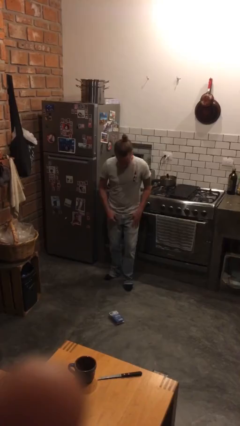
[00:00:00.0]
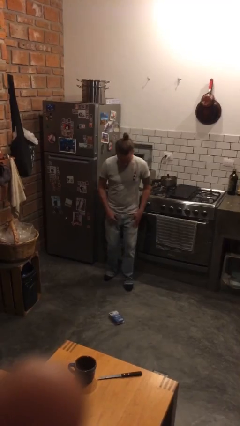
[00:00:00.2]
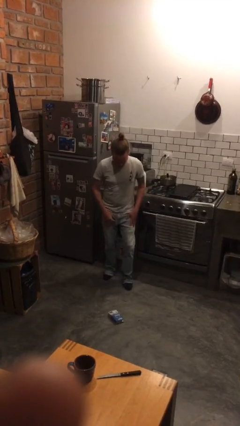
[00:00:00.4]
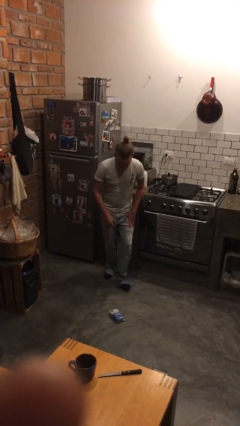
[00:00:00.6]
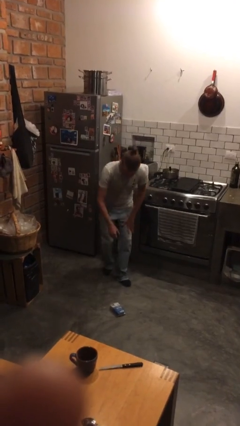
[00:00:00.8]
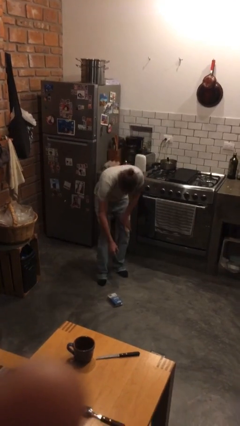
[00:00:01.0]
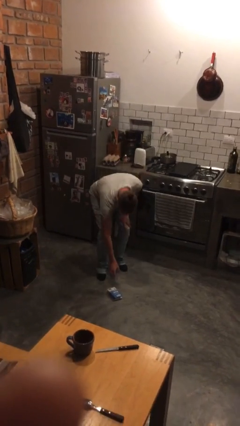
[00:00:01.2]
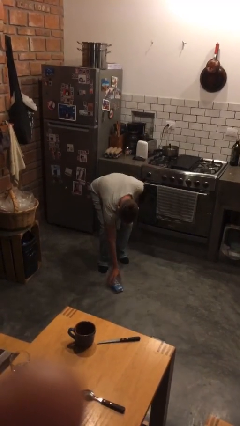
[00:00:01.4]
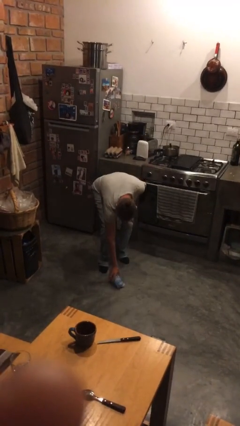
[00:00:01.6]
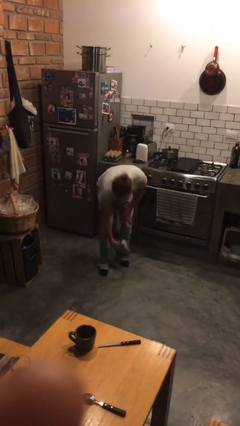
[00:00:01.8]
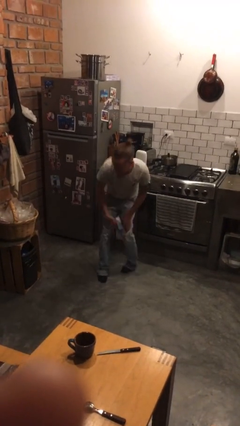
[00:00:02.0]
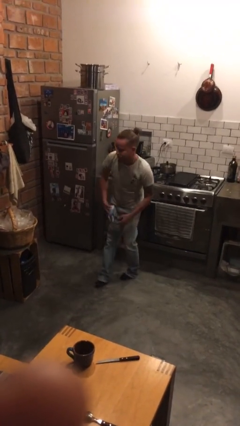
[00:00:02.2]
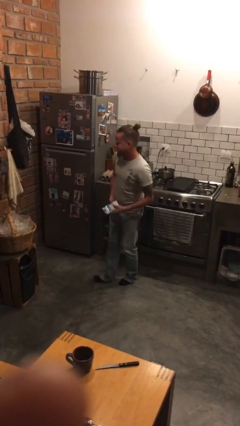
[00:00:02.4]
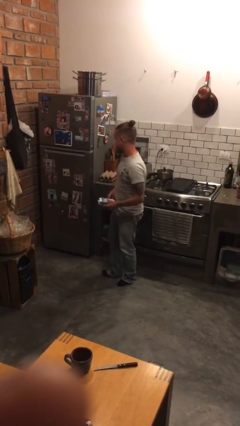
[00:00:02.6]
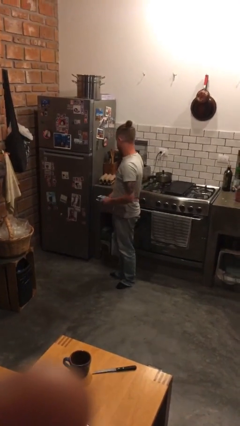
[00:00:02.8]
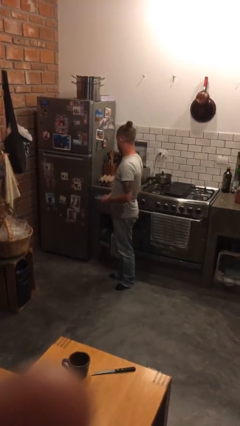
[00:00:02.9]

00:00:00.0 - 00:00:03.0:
person picks up object from floor

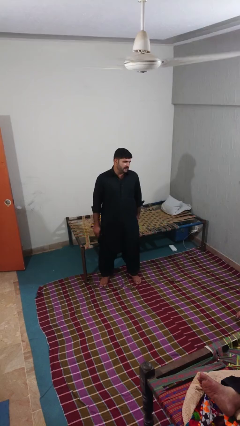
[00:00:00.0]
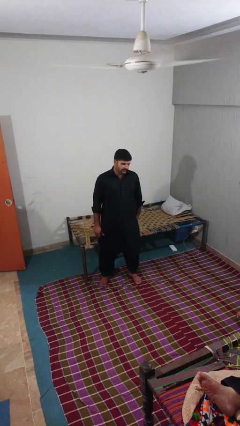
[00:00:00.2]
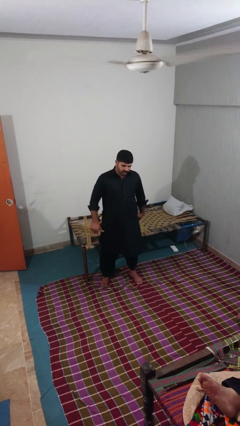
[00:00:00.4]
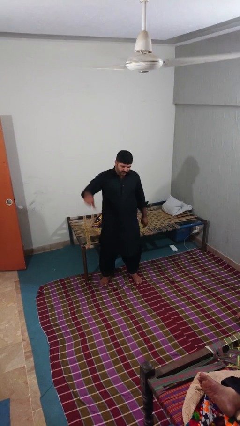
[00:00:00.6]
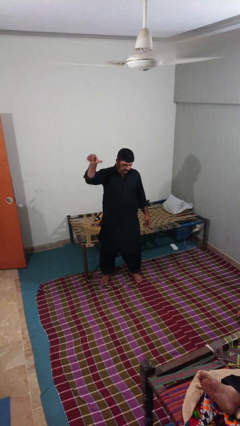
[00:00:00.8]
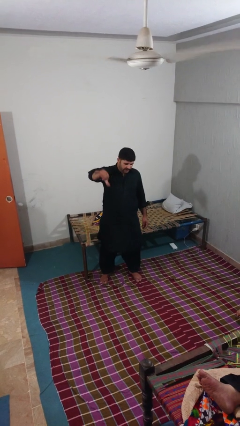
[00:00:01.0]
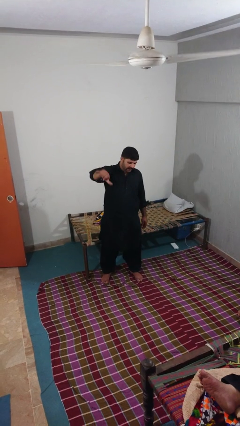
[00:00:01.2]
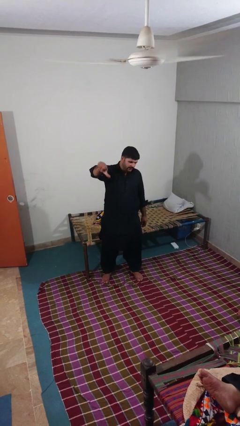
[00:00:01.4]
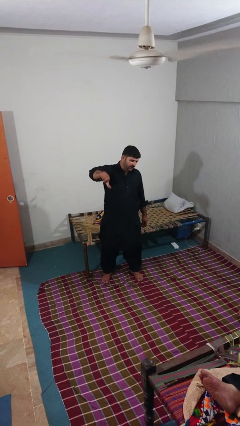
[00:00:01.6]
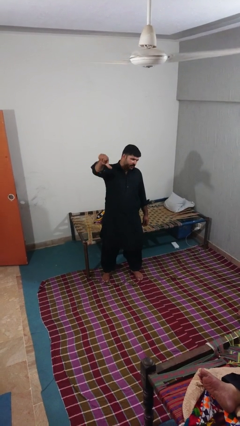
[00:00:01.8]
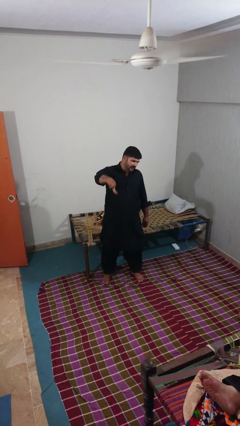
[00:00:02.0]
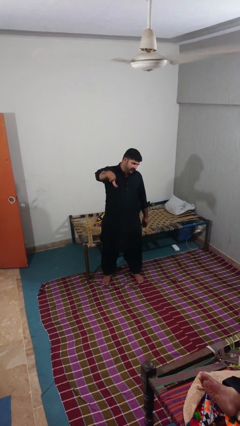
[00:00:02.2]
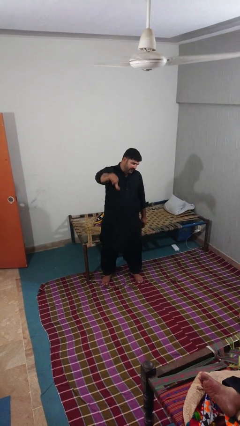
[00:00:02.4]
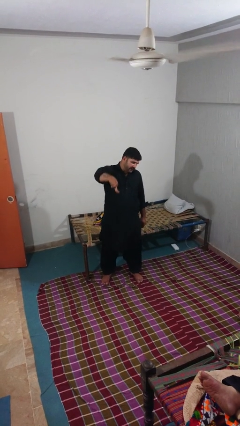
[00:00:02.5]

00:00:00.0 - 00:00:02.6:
person gestures thumbs down

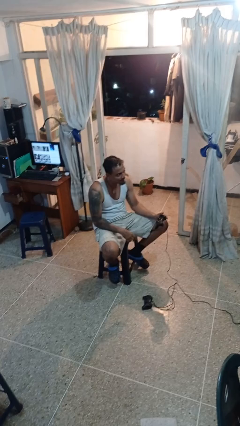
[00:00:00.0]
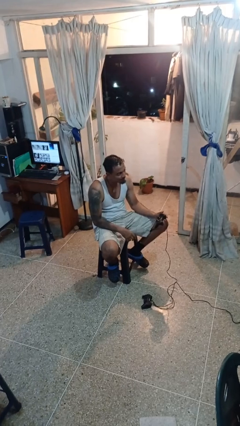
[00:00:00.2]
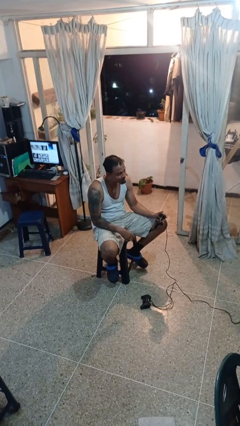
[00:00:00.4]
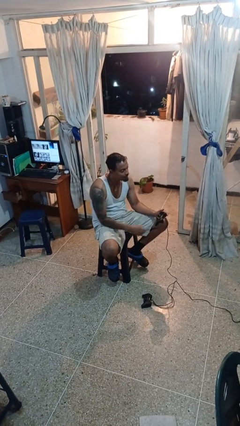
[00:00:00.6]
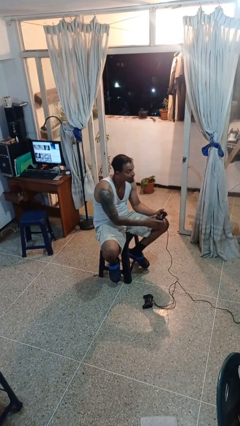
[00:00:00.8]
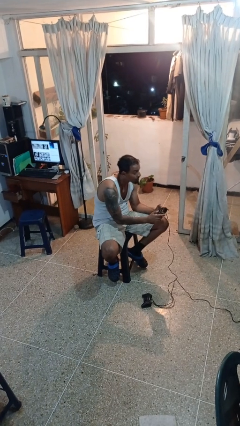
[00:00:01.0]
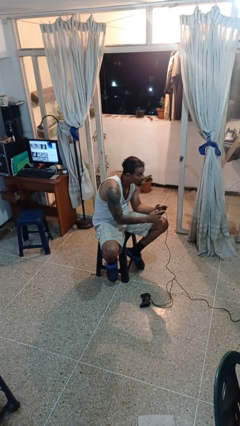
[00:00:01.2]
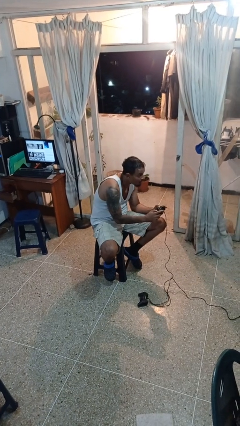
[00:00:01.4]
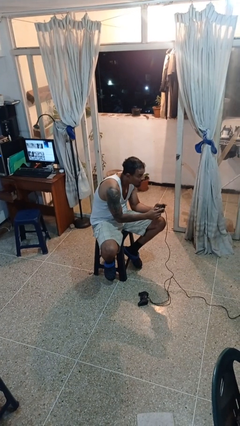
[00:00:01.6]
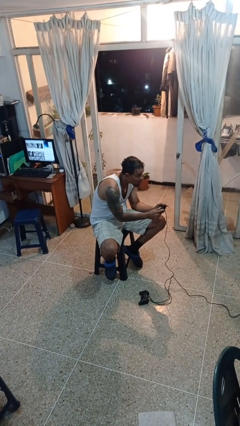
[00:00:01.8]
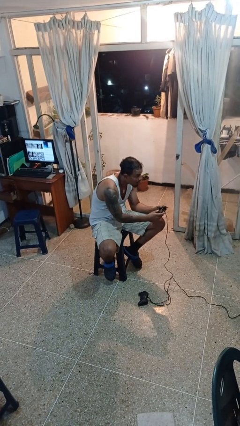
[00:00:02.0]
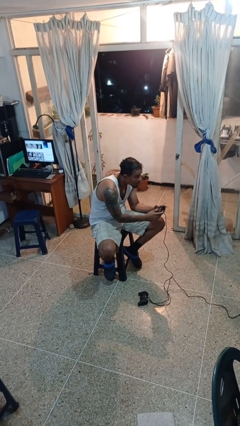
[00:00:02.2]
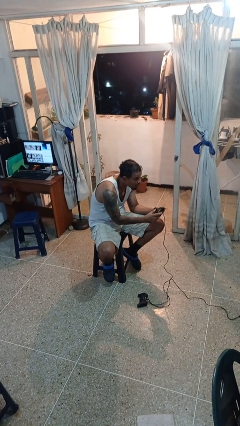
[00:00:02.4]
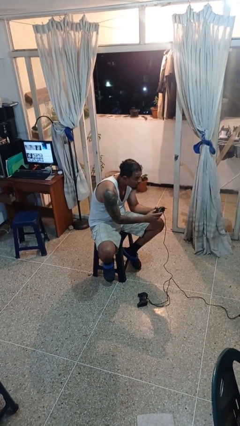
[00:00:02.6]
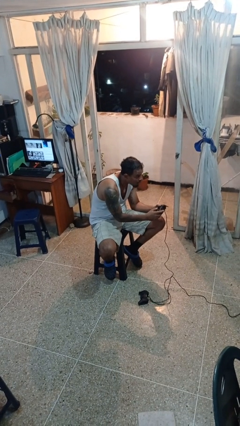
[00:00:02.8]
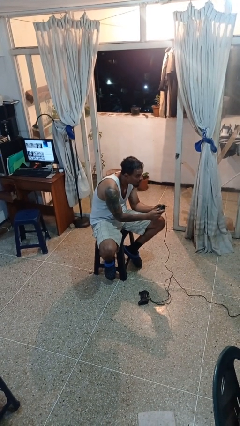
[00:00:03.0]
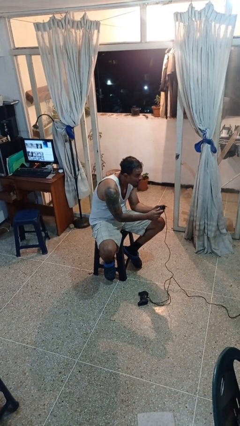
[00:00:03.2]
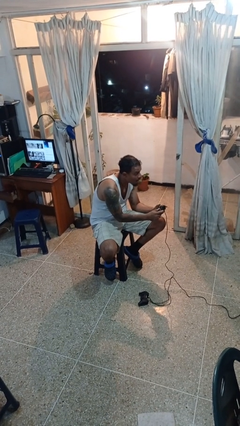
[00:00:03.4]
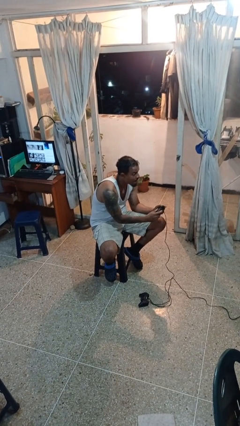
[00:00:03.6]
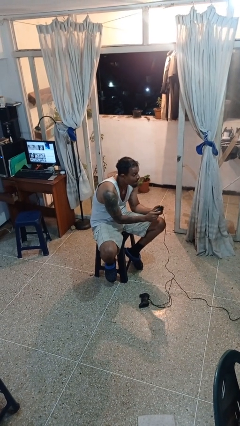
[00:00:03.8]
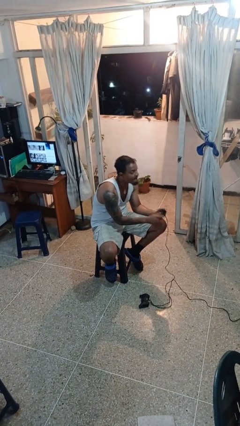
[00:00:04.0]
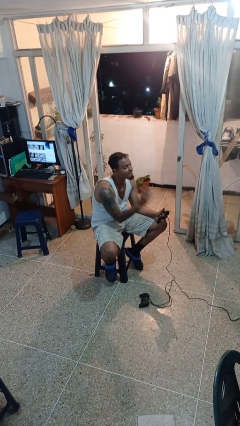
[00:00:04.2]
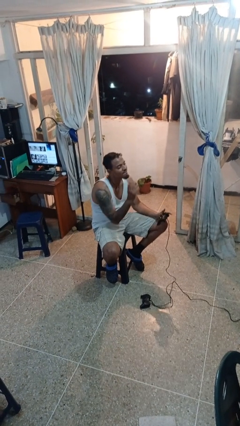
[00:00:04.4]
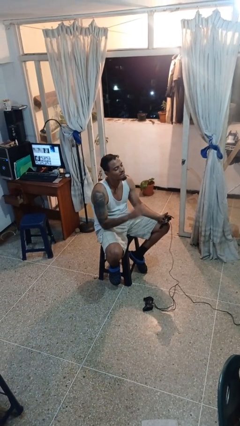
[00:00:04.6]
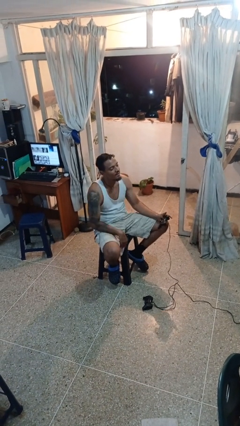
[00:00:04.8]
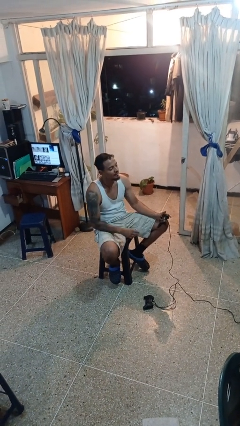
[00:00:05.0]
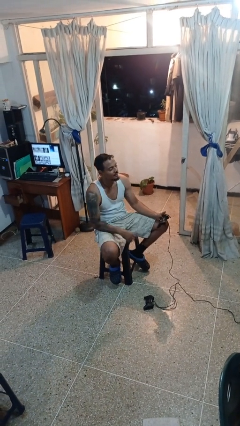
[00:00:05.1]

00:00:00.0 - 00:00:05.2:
person interacts with handheld game

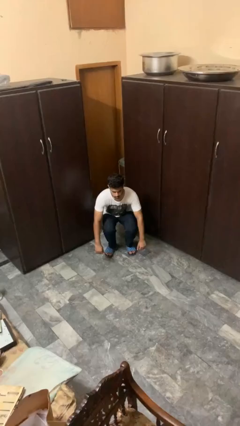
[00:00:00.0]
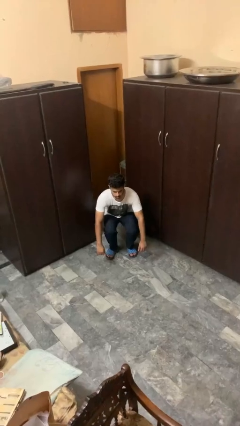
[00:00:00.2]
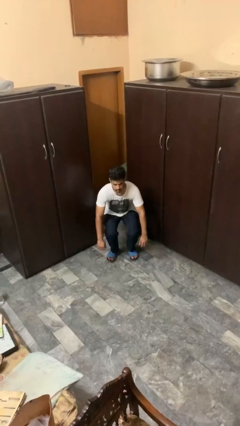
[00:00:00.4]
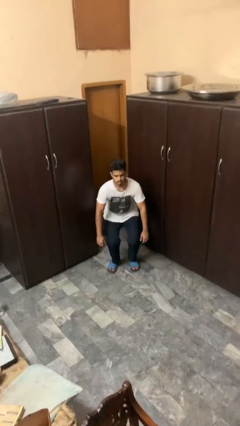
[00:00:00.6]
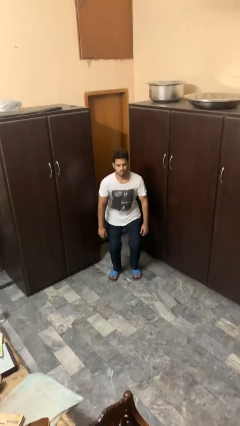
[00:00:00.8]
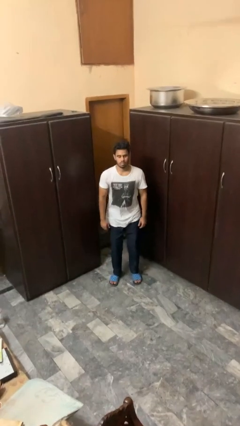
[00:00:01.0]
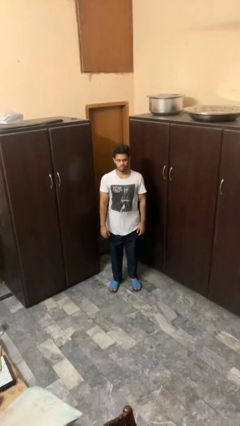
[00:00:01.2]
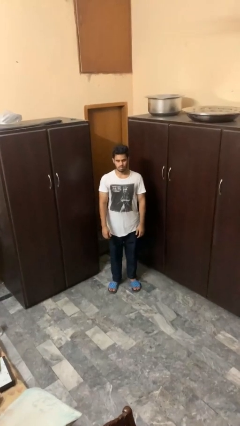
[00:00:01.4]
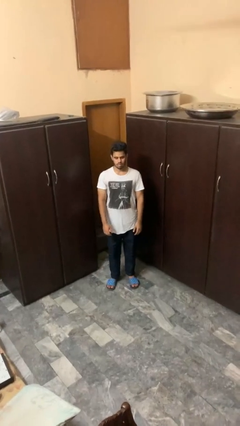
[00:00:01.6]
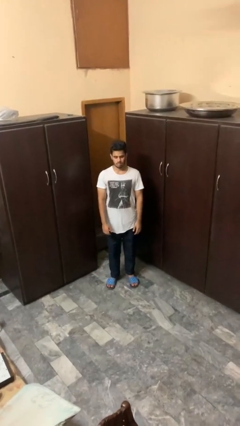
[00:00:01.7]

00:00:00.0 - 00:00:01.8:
person stands up

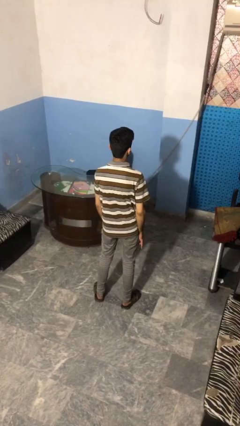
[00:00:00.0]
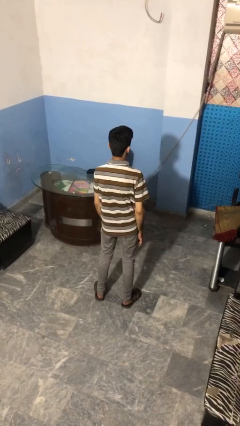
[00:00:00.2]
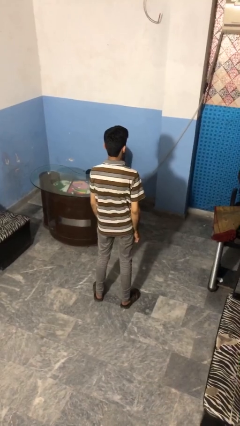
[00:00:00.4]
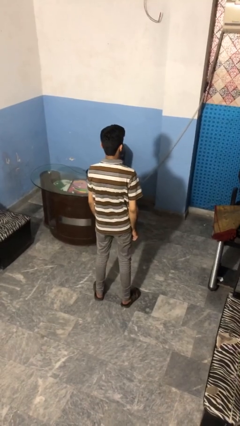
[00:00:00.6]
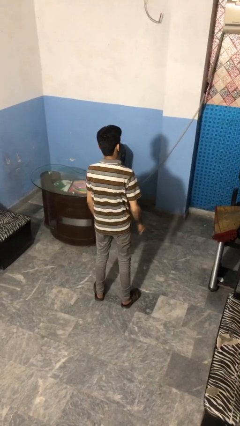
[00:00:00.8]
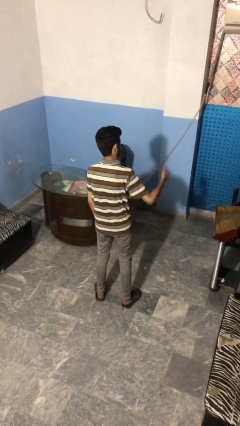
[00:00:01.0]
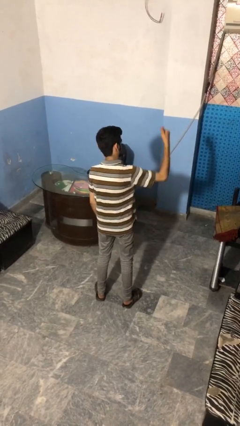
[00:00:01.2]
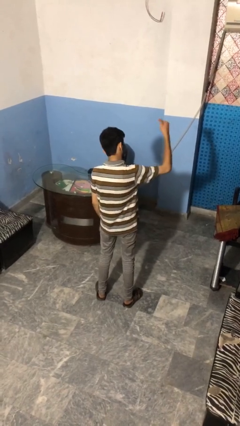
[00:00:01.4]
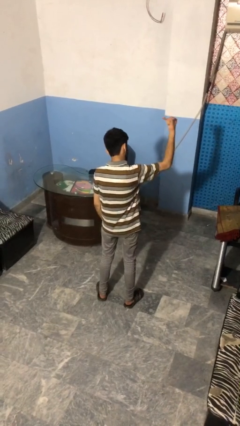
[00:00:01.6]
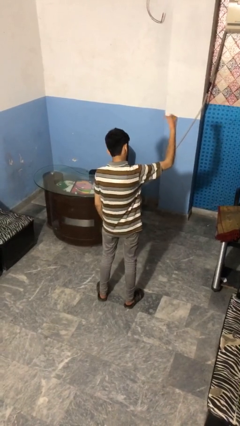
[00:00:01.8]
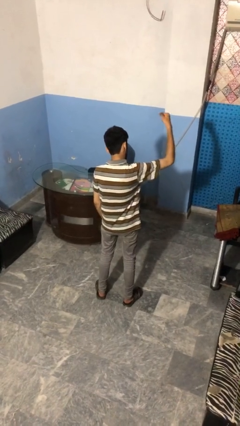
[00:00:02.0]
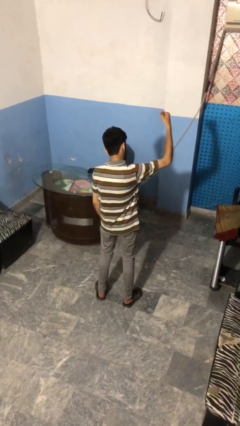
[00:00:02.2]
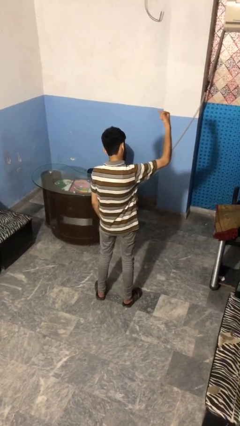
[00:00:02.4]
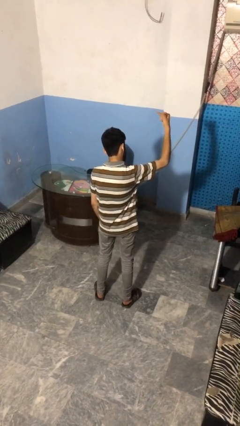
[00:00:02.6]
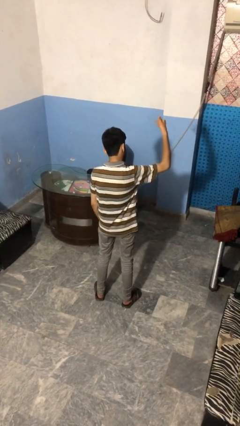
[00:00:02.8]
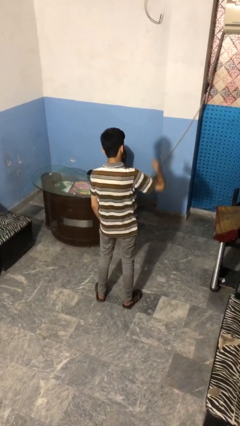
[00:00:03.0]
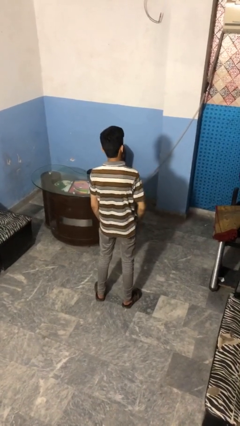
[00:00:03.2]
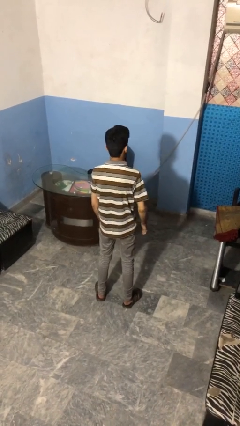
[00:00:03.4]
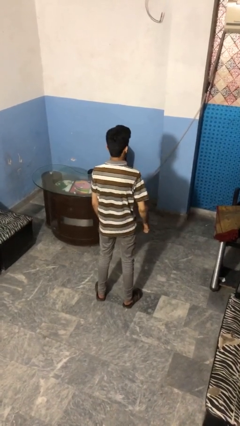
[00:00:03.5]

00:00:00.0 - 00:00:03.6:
person gestures hang loose

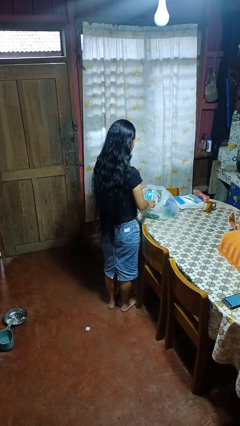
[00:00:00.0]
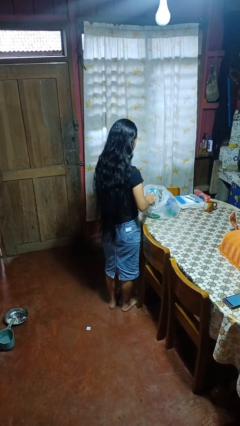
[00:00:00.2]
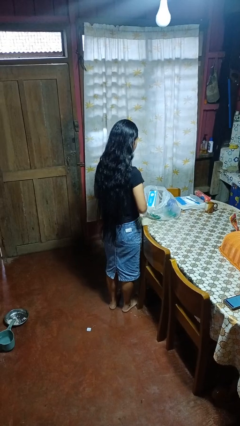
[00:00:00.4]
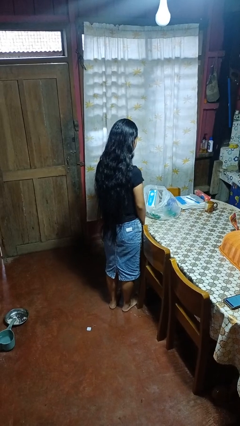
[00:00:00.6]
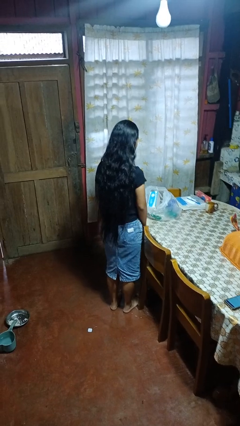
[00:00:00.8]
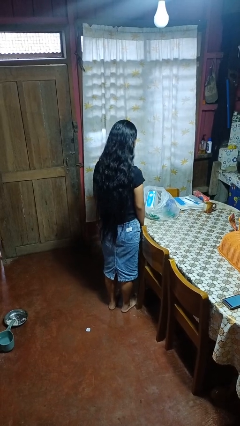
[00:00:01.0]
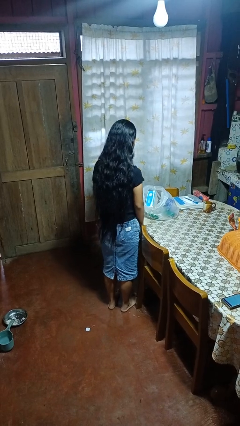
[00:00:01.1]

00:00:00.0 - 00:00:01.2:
person puts object into bag
